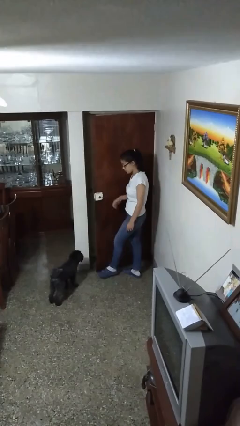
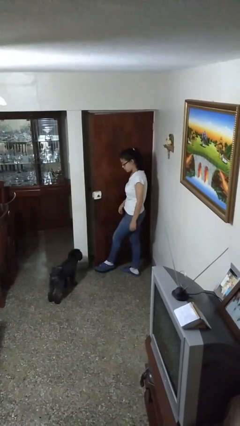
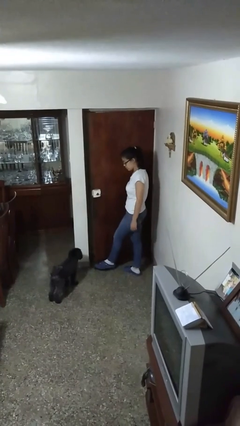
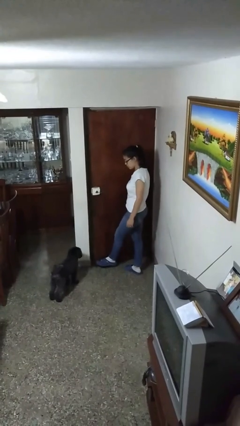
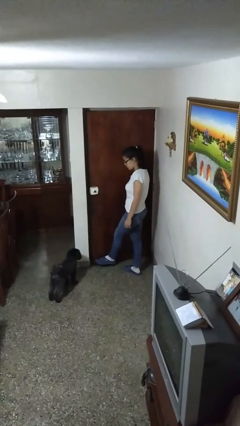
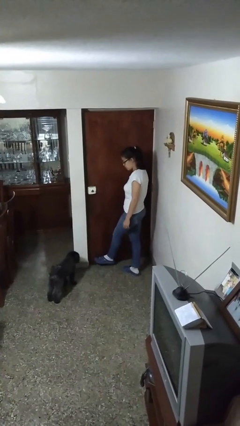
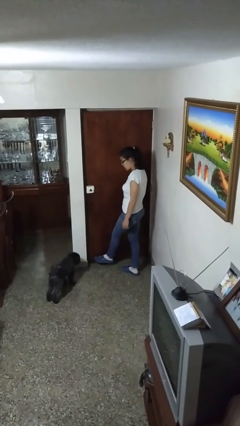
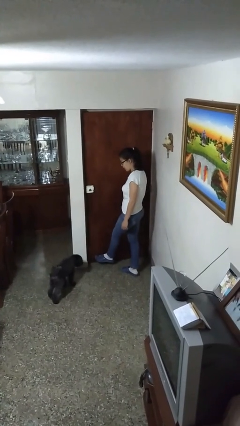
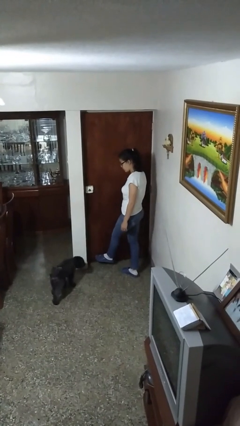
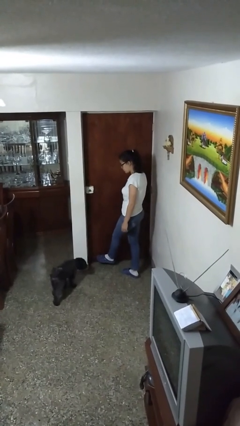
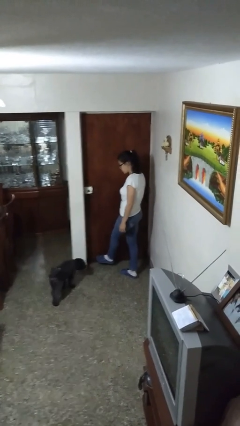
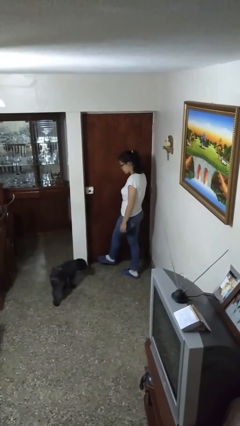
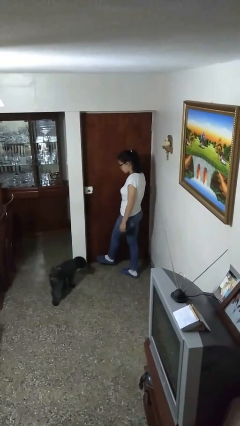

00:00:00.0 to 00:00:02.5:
person closes door with foot

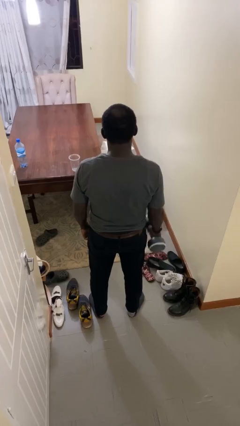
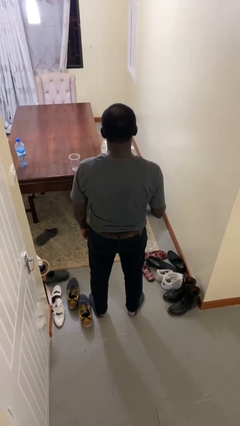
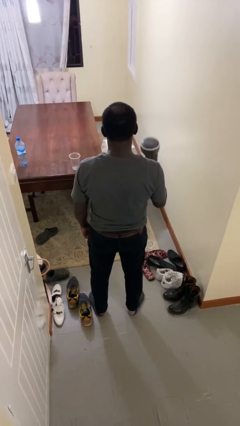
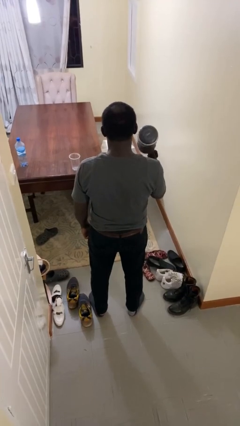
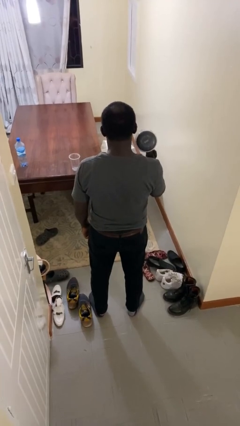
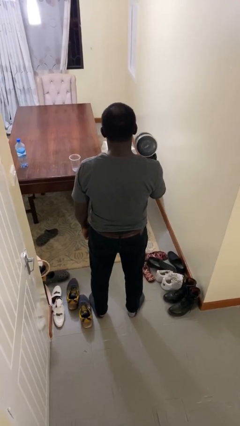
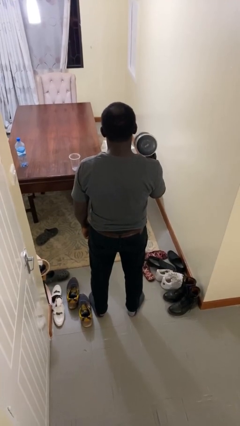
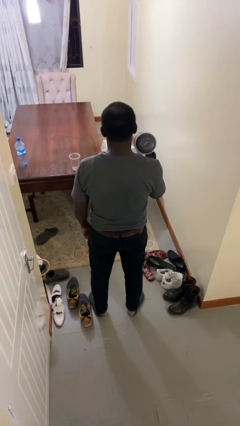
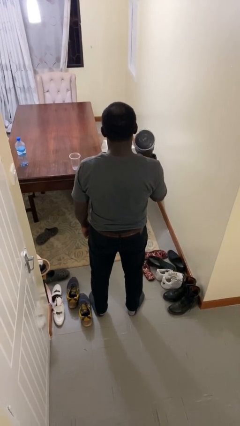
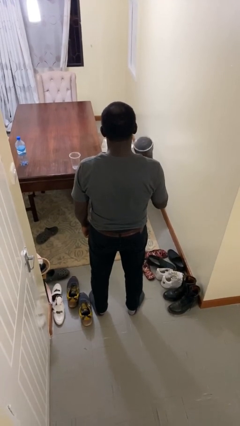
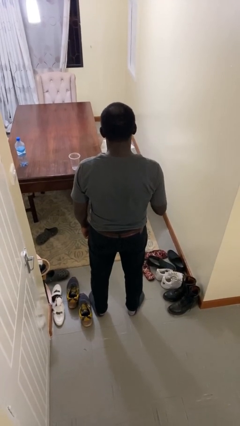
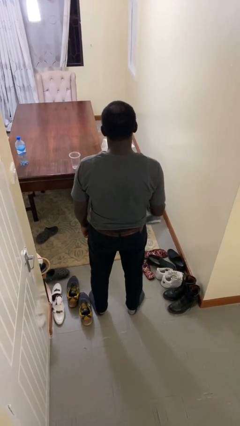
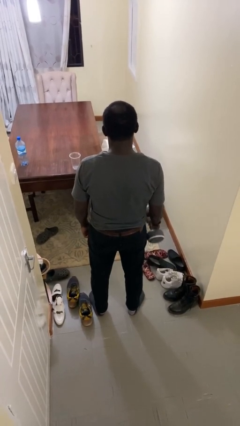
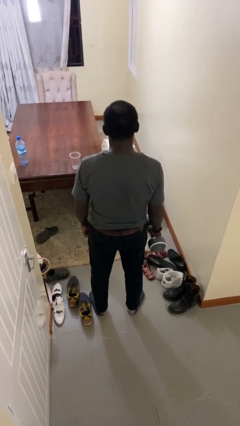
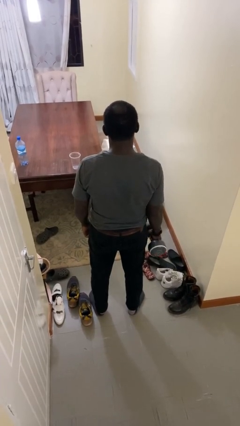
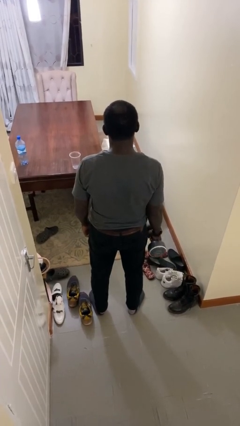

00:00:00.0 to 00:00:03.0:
person lifts dumbbells

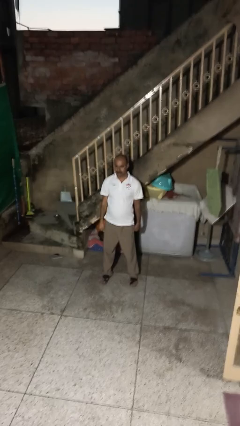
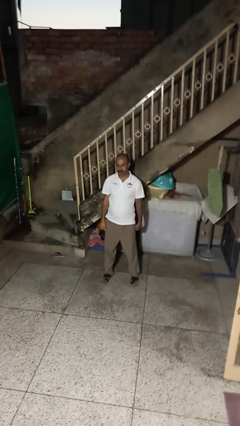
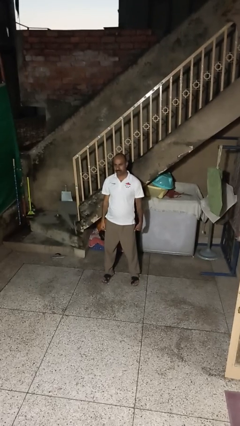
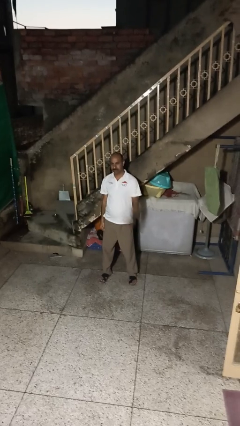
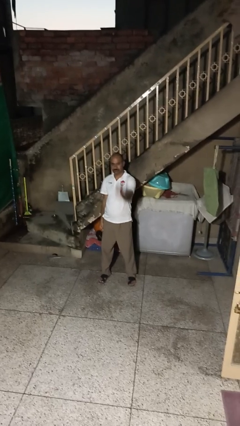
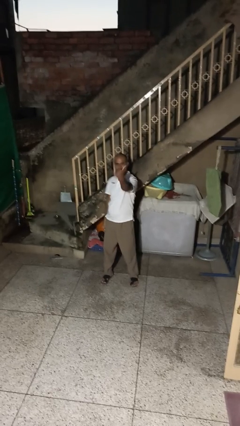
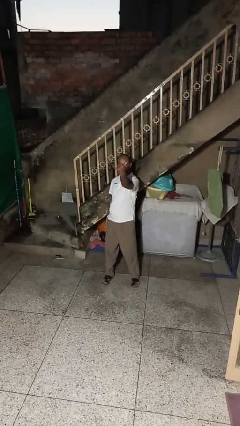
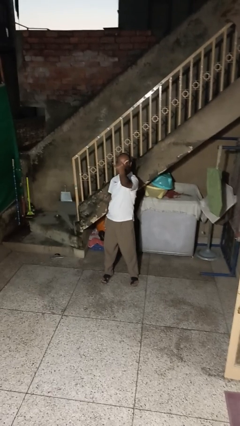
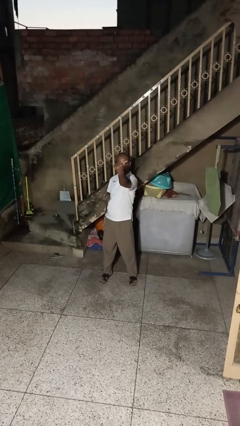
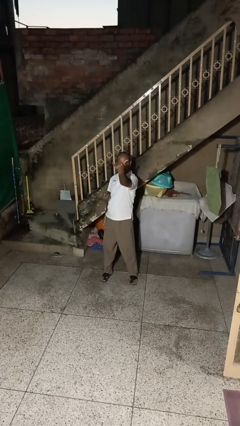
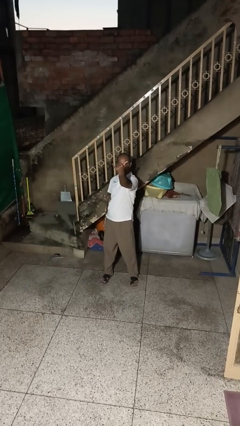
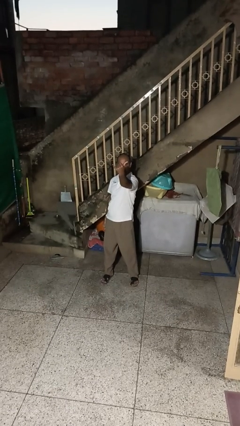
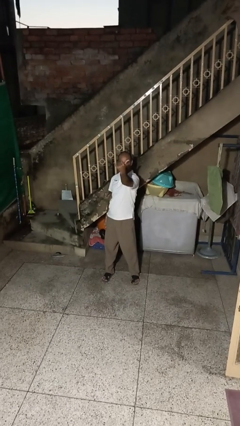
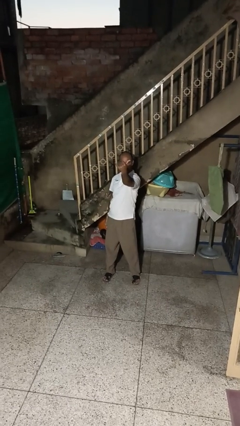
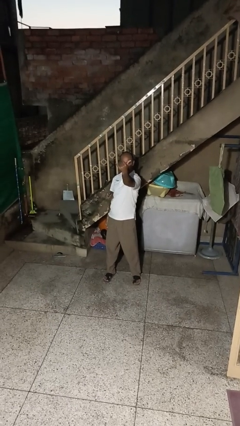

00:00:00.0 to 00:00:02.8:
person gestures hang loose

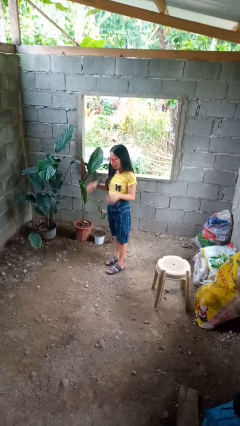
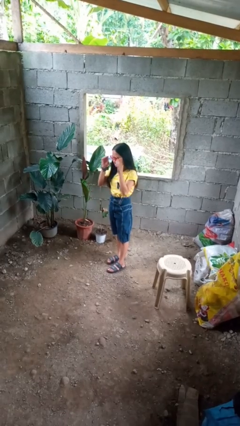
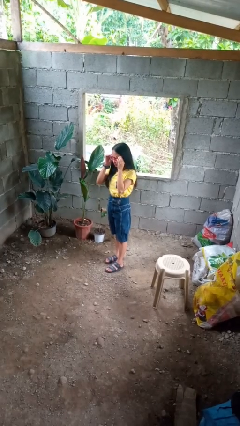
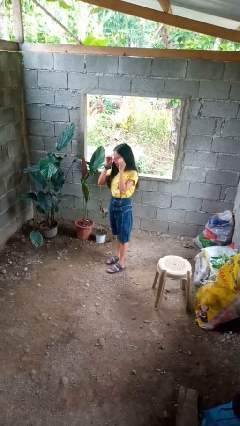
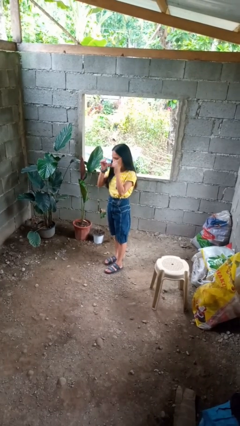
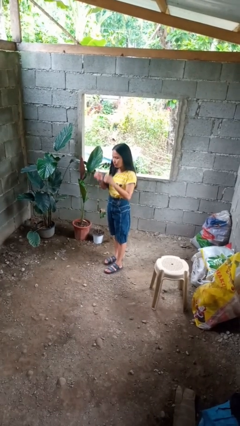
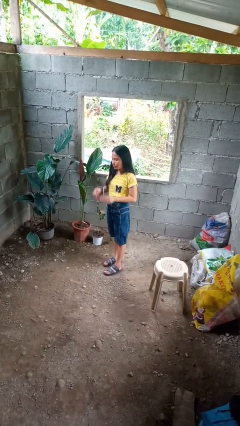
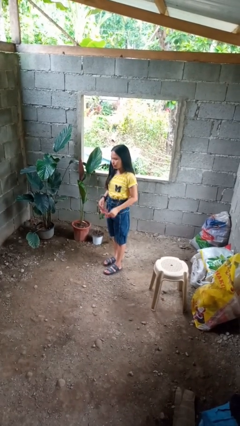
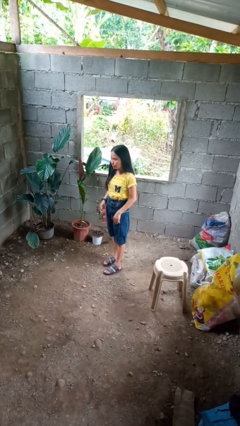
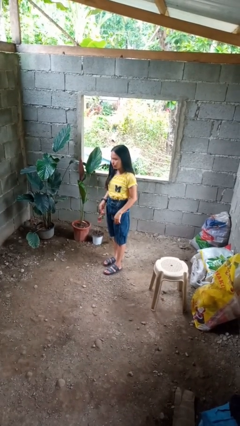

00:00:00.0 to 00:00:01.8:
person takes off sunglasses

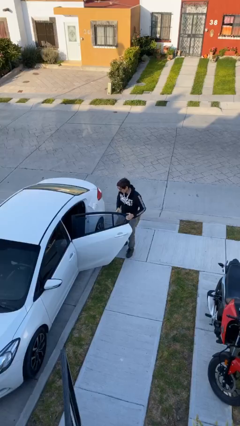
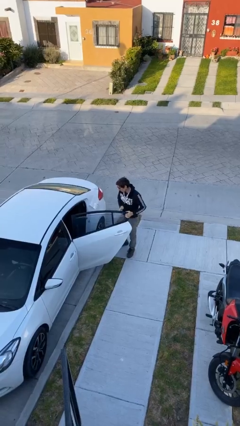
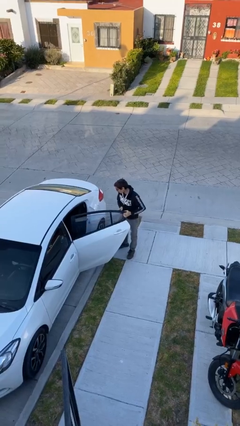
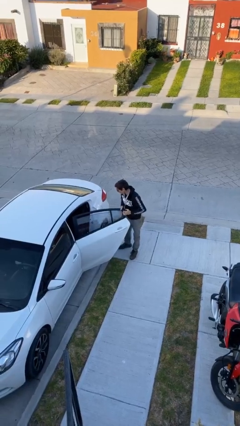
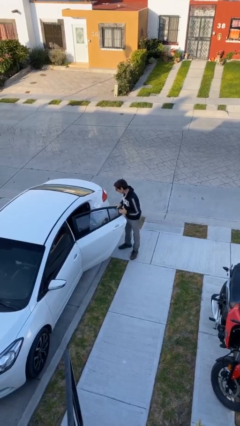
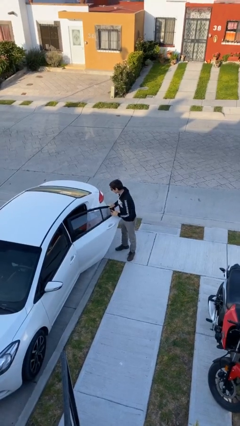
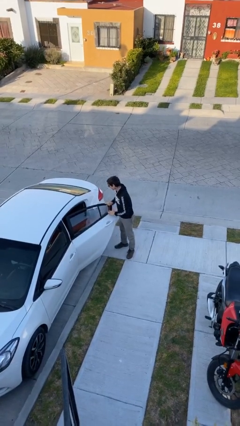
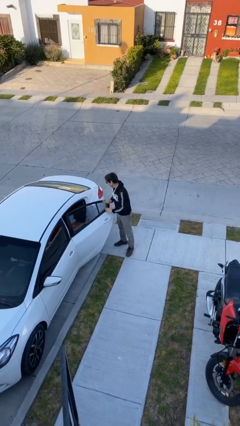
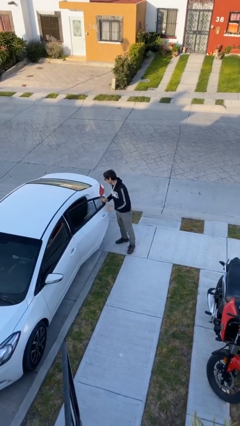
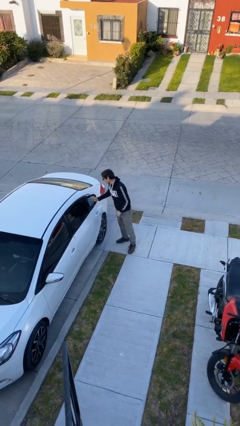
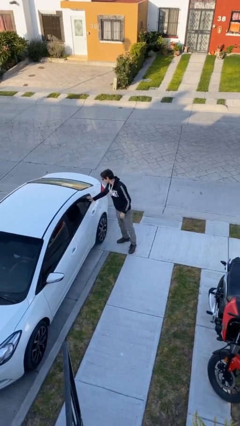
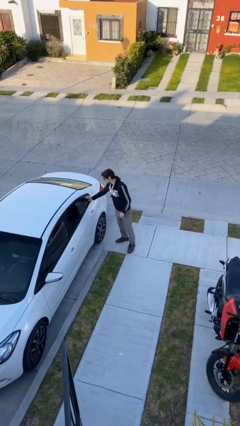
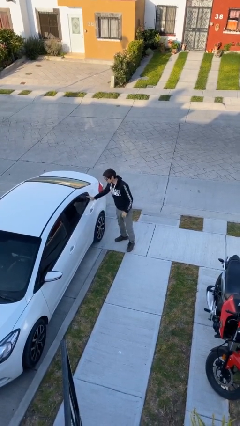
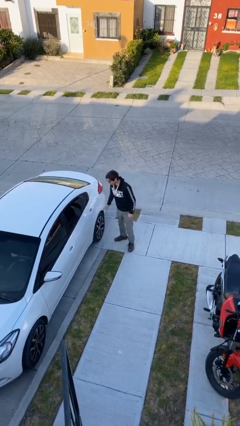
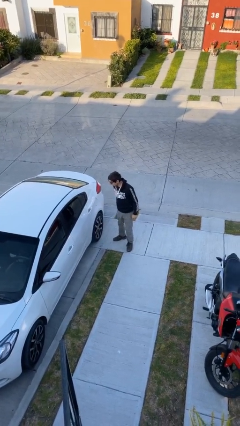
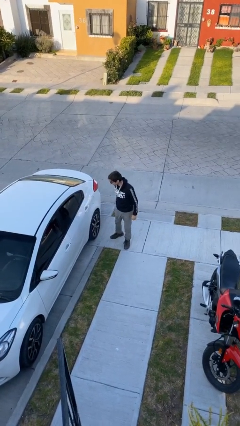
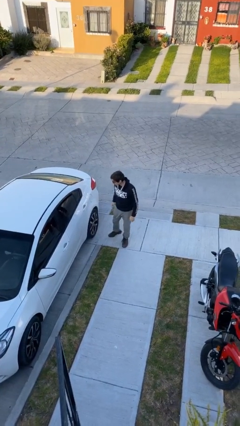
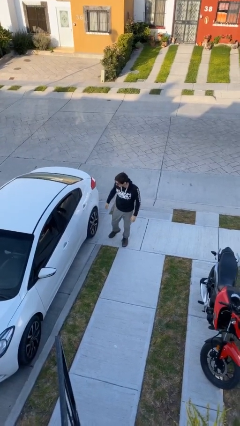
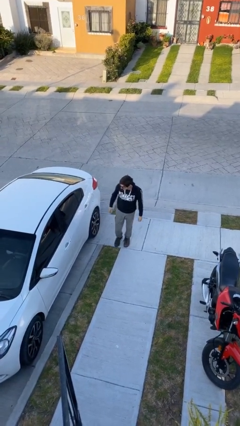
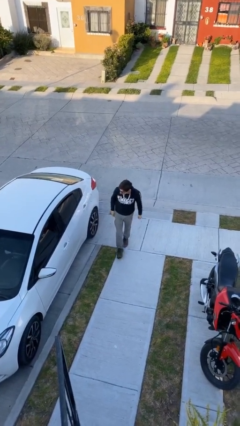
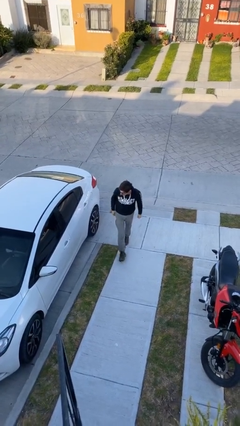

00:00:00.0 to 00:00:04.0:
person closes car door

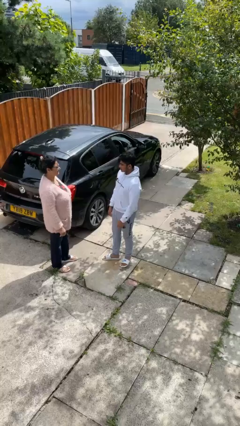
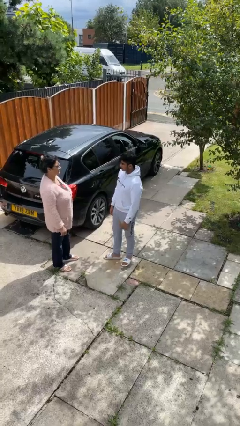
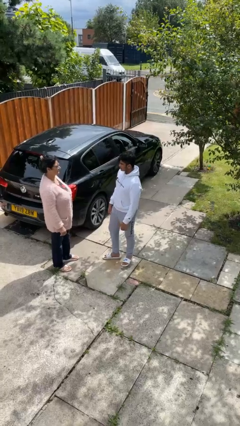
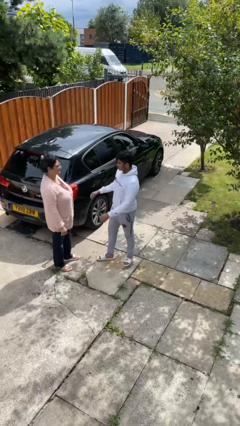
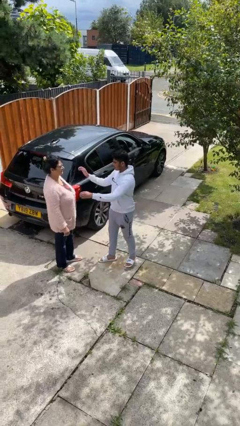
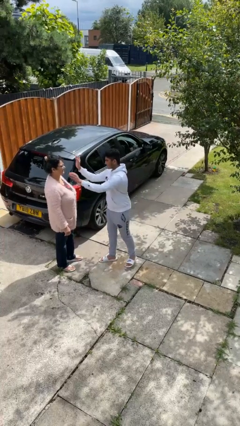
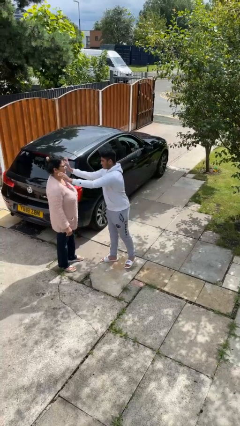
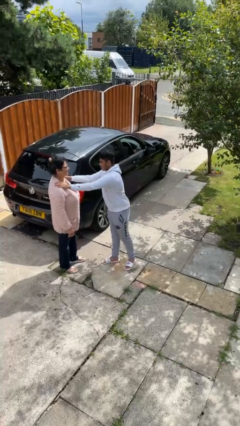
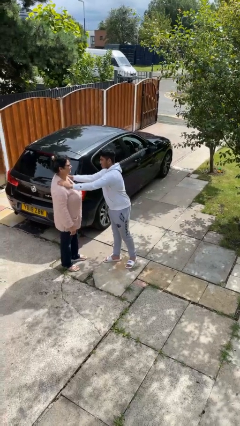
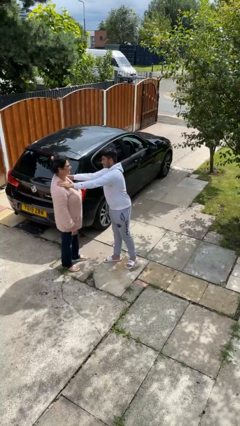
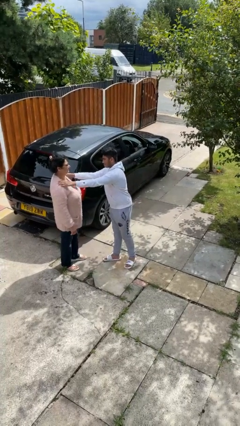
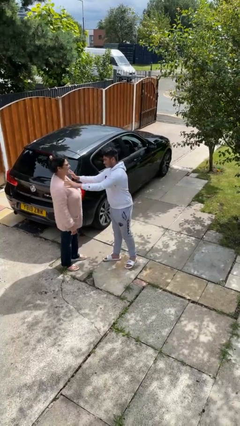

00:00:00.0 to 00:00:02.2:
person pounds shoulders of person

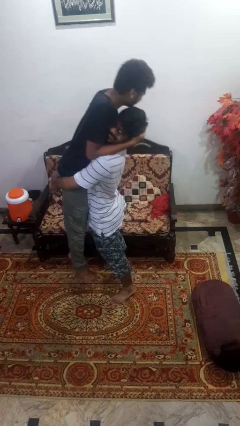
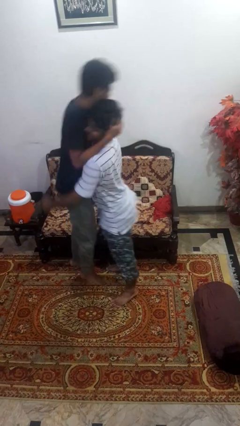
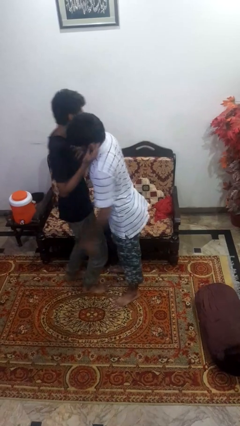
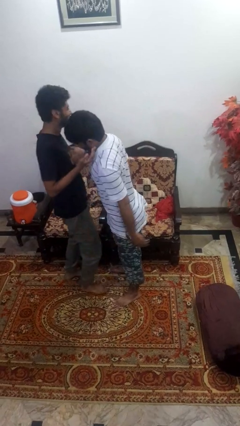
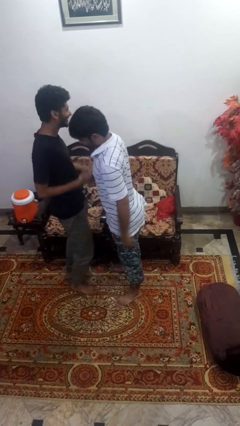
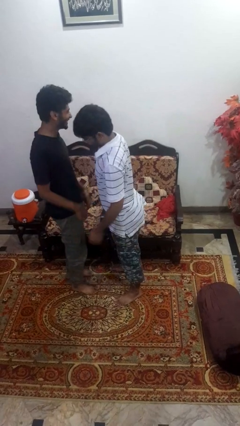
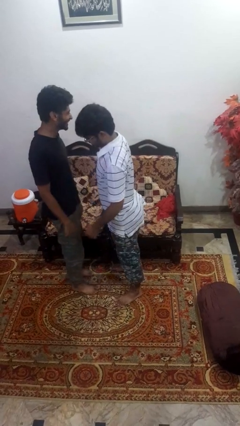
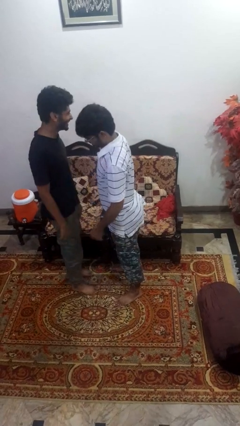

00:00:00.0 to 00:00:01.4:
person puts down person
